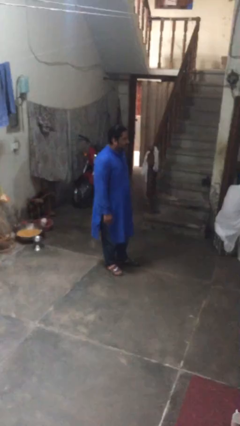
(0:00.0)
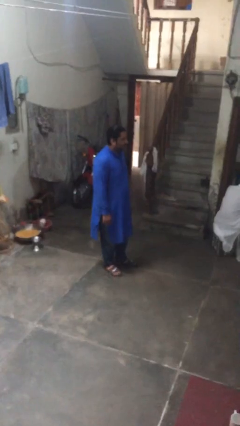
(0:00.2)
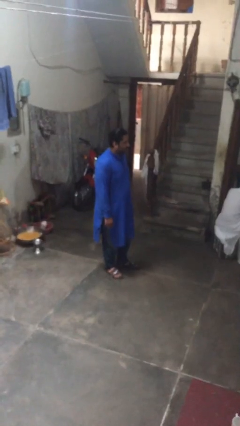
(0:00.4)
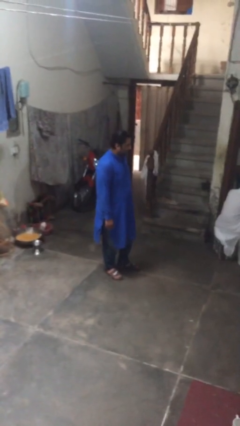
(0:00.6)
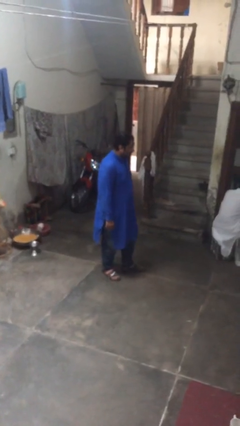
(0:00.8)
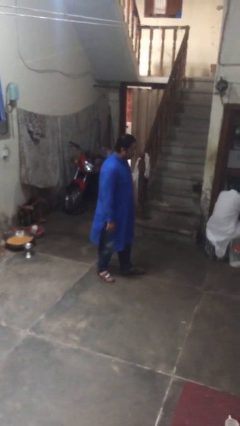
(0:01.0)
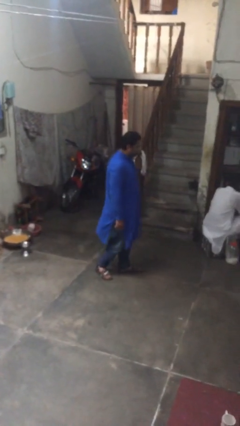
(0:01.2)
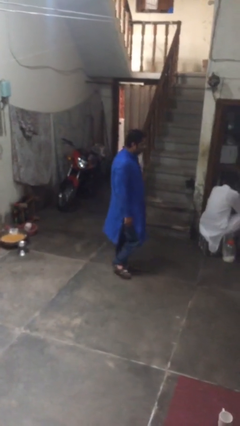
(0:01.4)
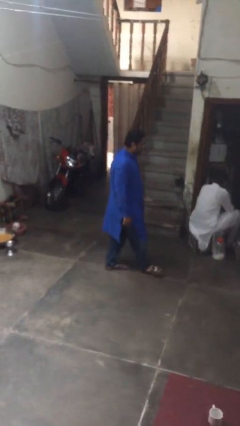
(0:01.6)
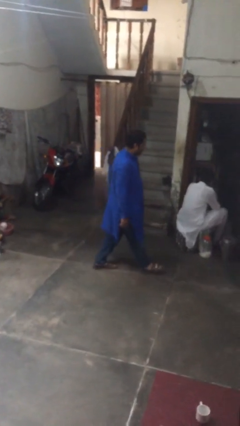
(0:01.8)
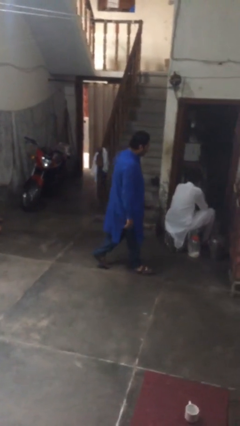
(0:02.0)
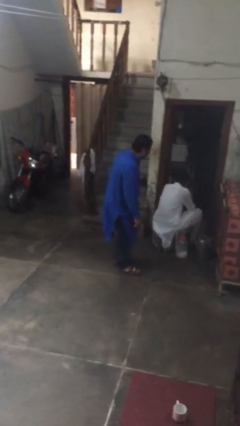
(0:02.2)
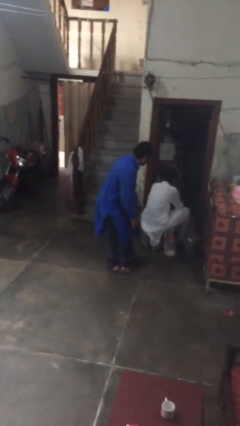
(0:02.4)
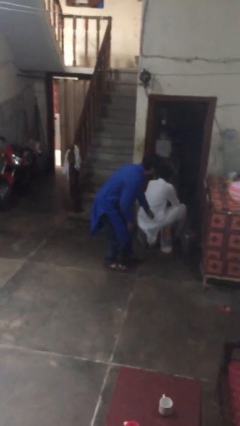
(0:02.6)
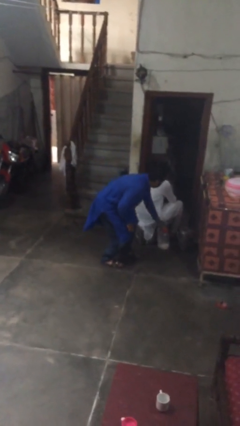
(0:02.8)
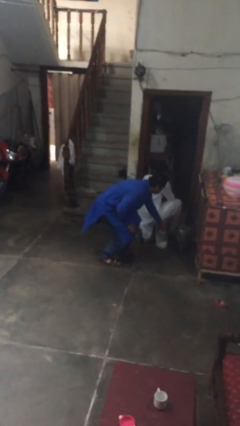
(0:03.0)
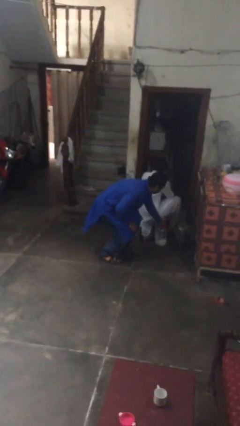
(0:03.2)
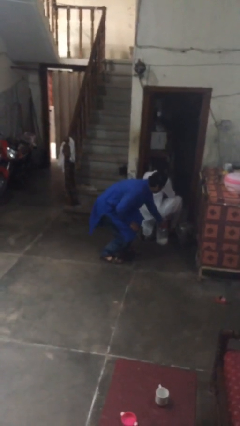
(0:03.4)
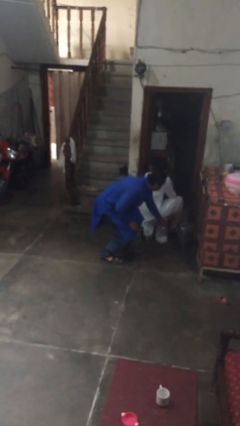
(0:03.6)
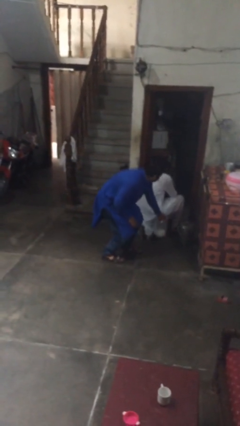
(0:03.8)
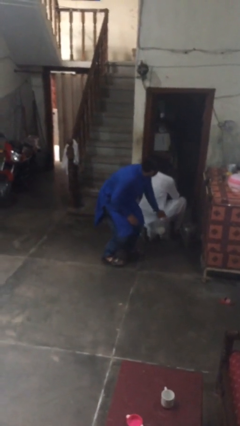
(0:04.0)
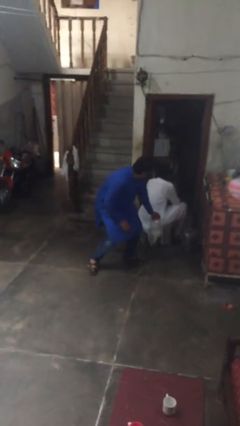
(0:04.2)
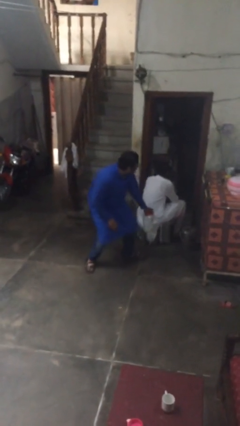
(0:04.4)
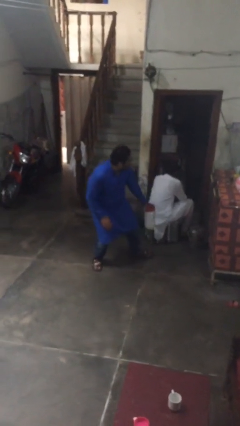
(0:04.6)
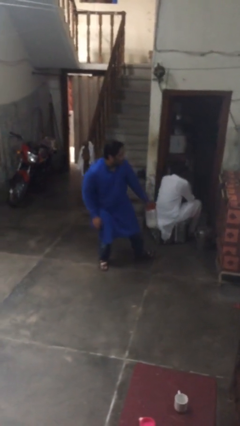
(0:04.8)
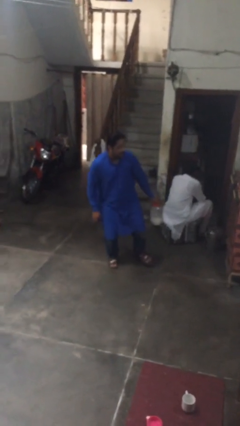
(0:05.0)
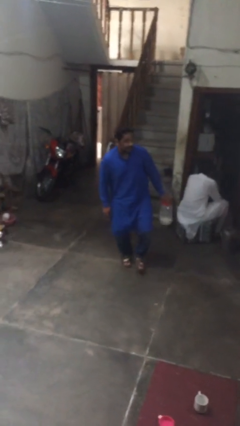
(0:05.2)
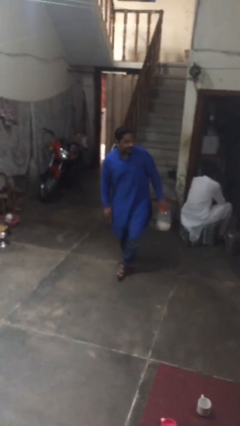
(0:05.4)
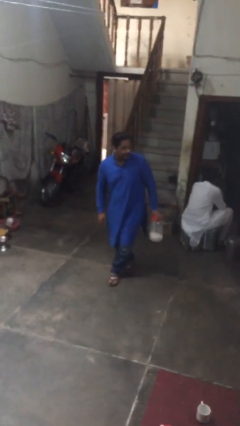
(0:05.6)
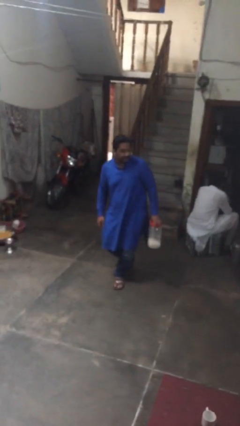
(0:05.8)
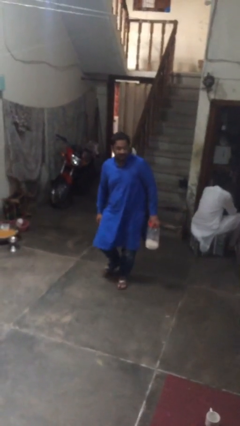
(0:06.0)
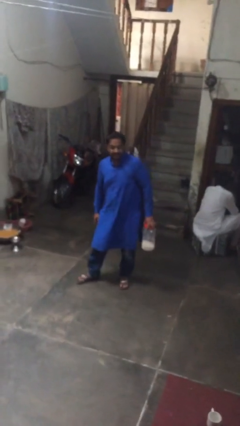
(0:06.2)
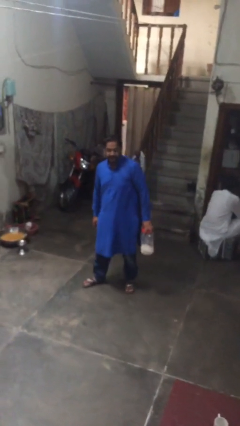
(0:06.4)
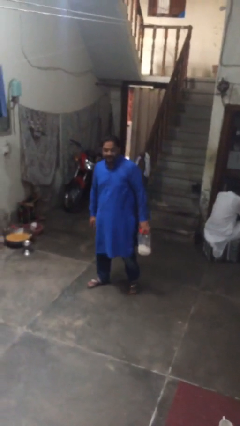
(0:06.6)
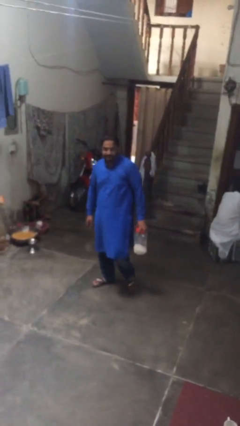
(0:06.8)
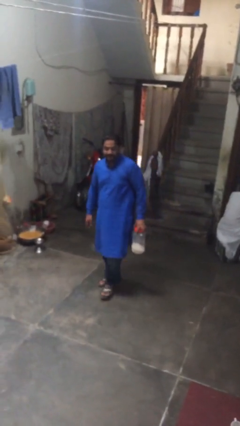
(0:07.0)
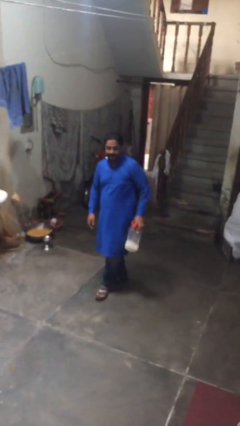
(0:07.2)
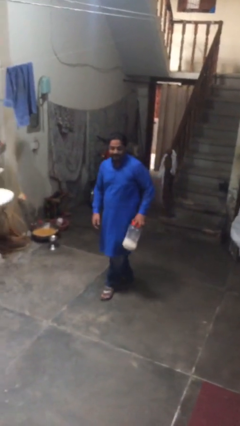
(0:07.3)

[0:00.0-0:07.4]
person steals object from person

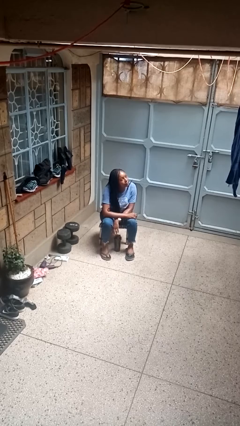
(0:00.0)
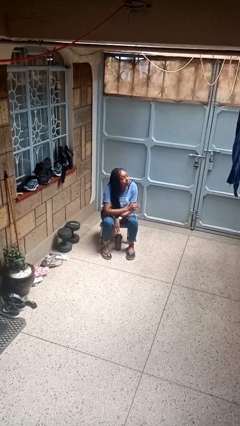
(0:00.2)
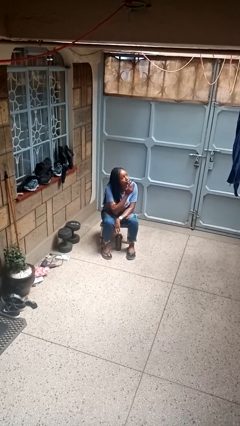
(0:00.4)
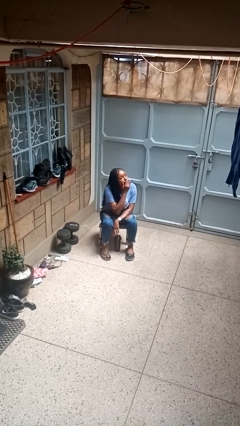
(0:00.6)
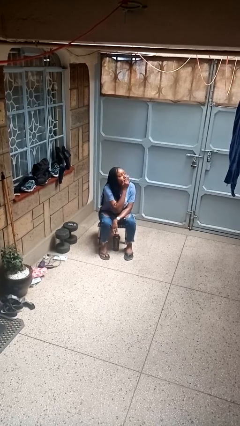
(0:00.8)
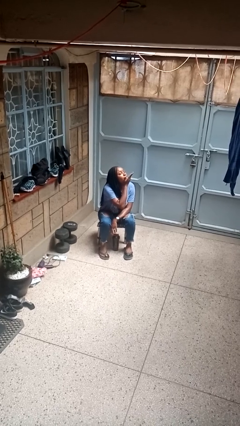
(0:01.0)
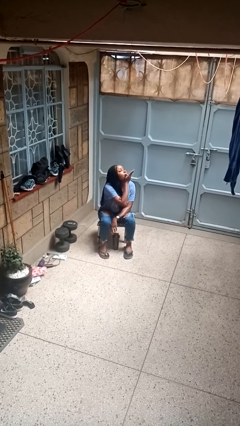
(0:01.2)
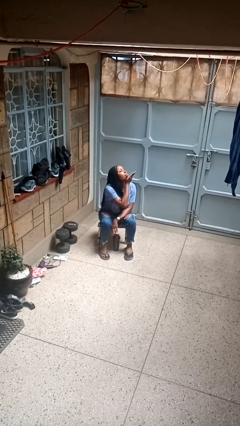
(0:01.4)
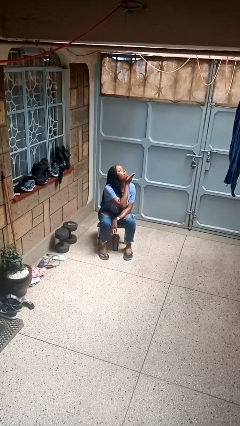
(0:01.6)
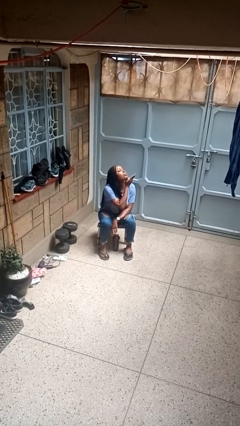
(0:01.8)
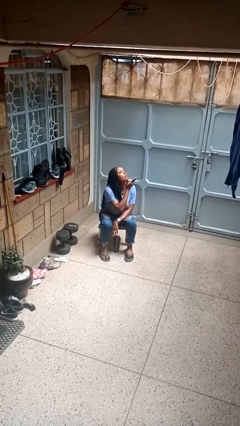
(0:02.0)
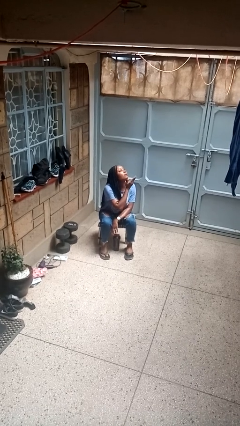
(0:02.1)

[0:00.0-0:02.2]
person gestures blow kiss

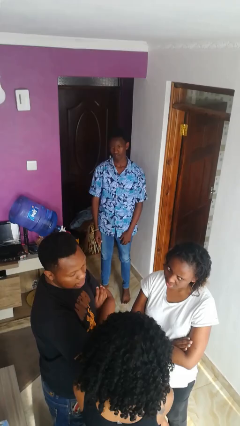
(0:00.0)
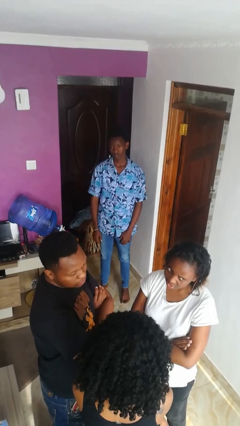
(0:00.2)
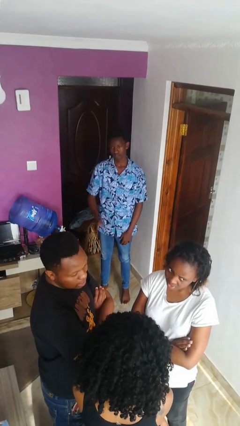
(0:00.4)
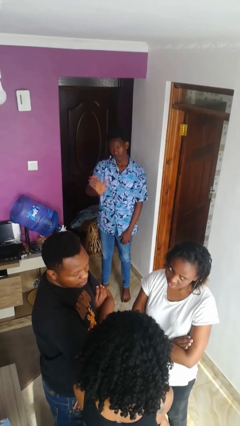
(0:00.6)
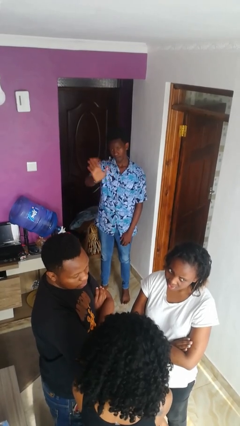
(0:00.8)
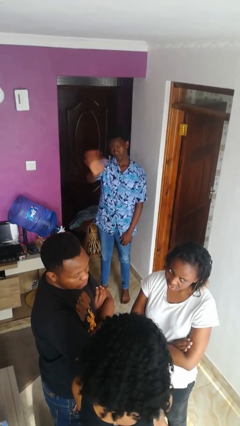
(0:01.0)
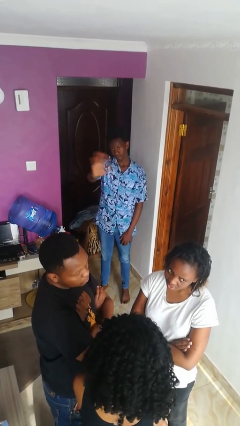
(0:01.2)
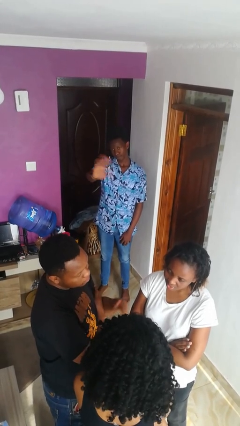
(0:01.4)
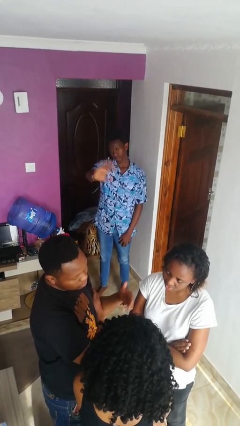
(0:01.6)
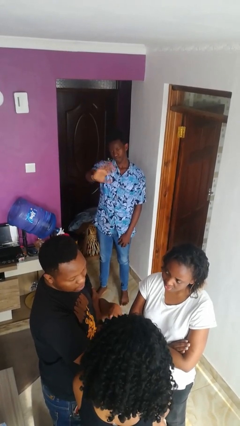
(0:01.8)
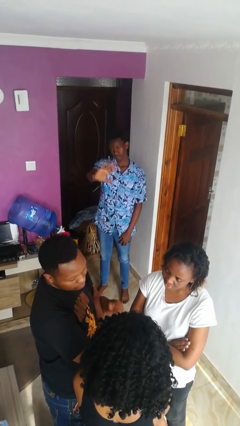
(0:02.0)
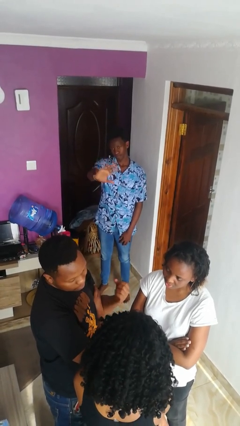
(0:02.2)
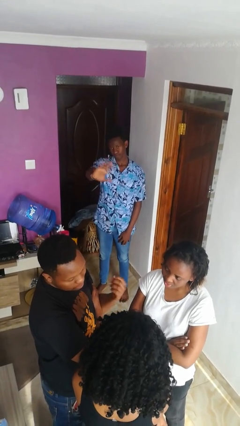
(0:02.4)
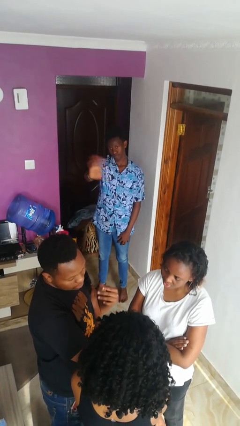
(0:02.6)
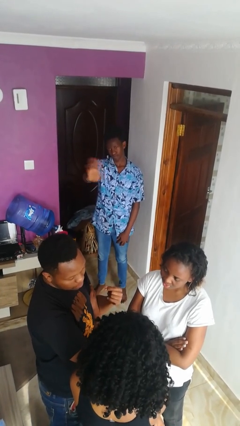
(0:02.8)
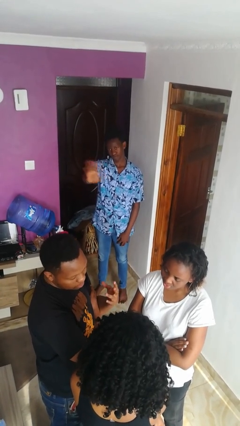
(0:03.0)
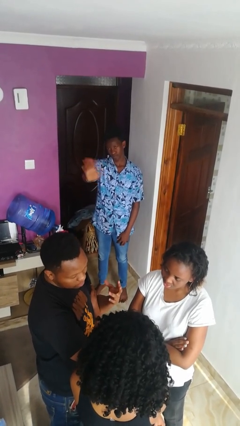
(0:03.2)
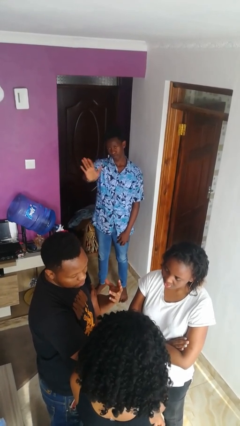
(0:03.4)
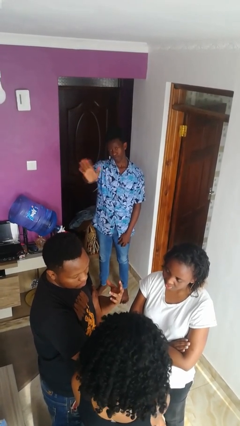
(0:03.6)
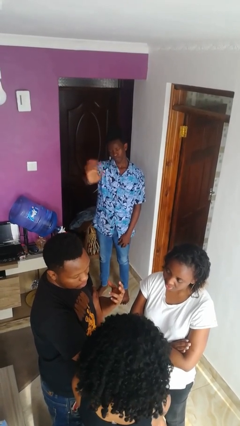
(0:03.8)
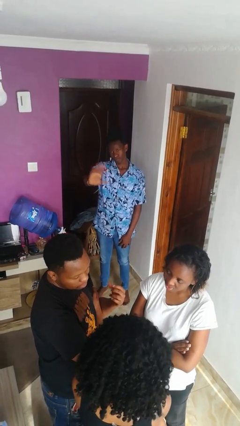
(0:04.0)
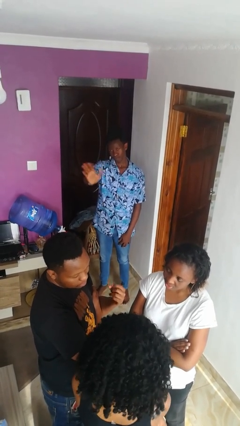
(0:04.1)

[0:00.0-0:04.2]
person waves at person

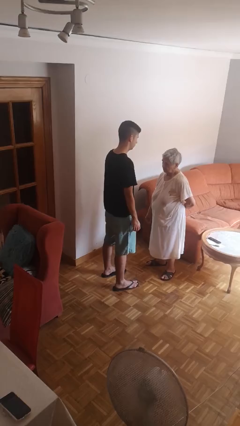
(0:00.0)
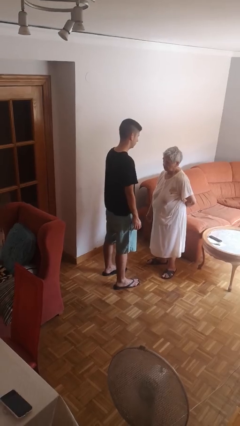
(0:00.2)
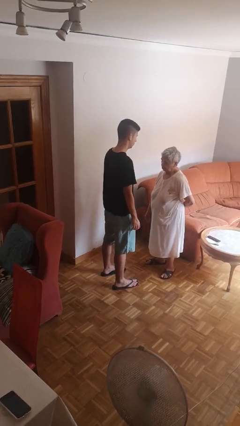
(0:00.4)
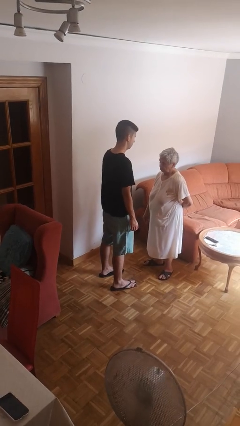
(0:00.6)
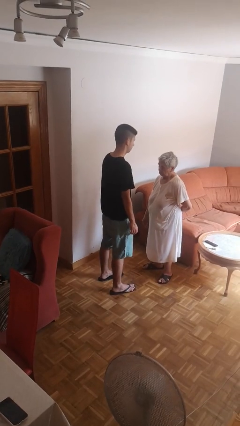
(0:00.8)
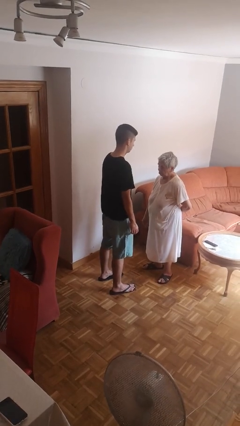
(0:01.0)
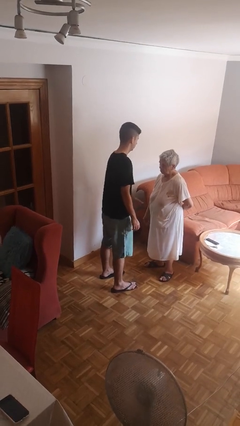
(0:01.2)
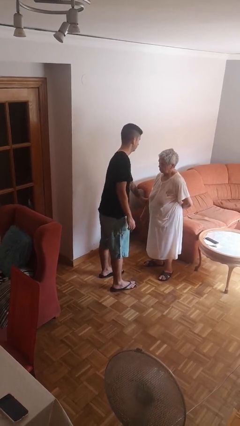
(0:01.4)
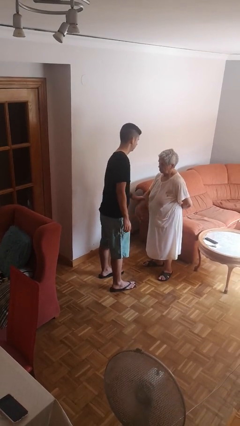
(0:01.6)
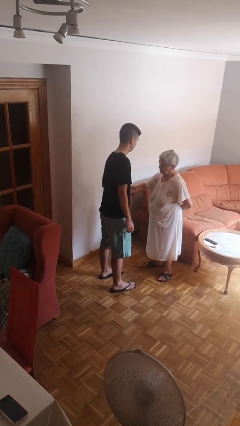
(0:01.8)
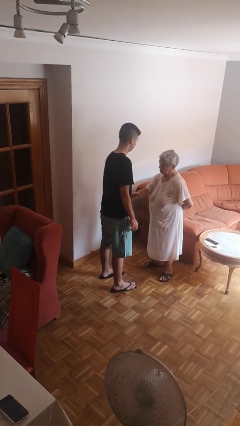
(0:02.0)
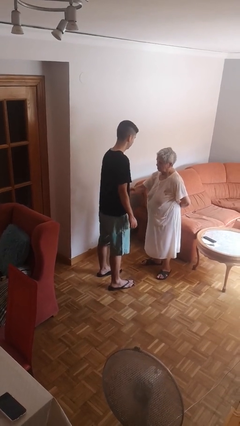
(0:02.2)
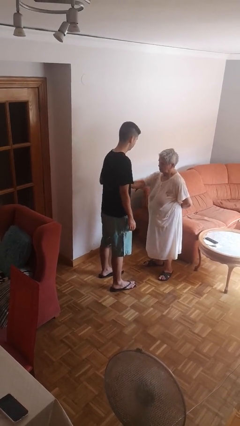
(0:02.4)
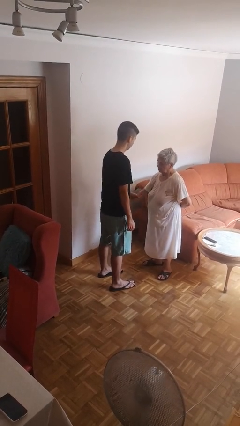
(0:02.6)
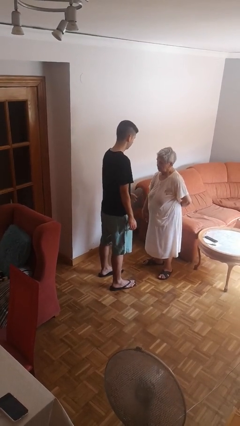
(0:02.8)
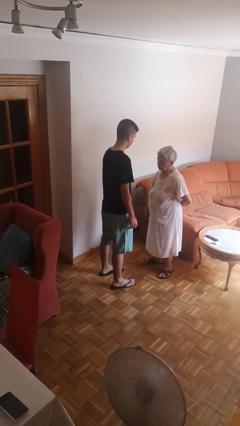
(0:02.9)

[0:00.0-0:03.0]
person grabs person by forearm

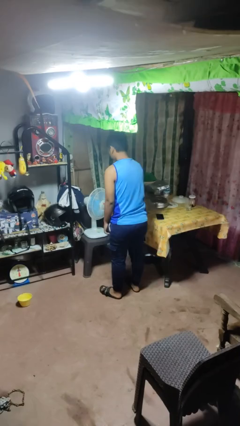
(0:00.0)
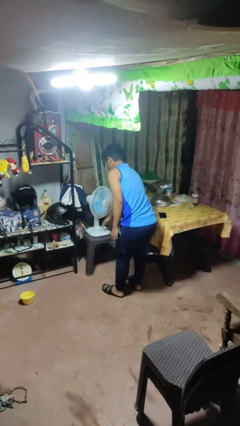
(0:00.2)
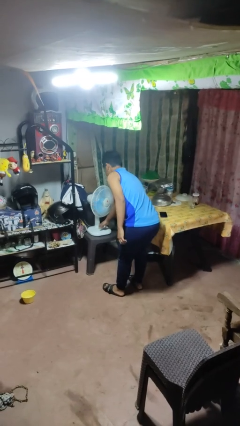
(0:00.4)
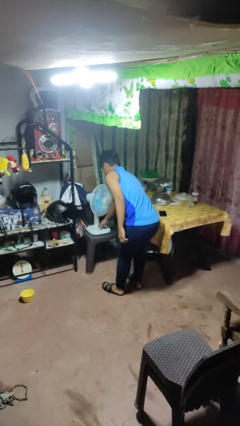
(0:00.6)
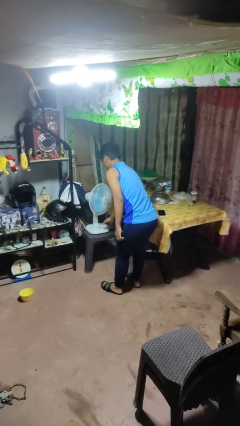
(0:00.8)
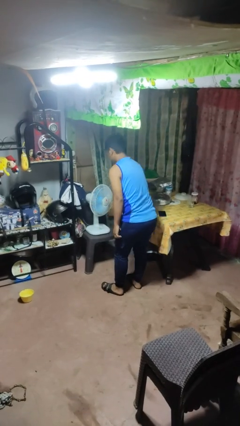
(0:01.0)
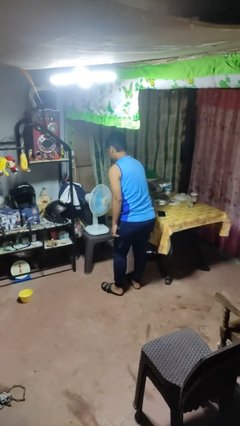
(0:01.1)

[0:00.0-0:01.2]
person turns off fan
